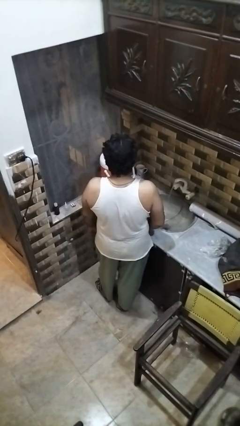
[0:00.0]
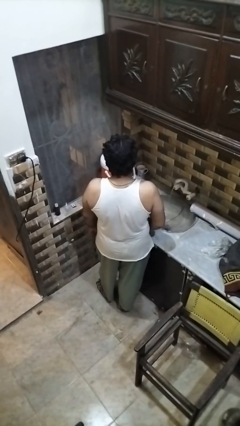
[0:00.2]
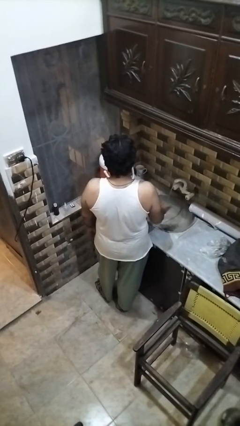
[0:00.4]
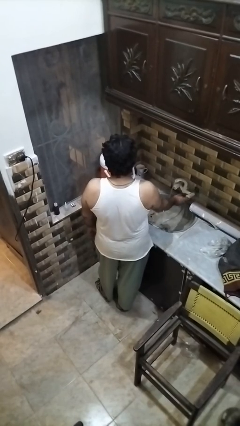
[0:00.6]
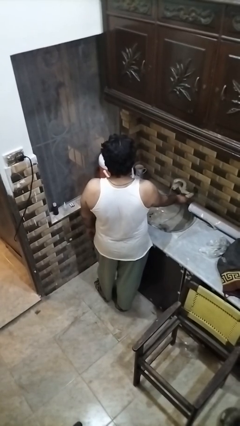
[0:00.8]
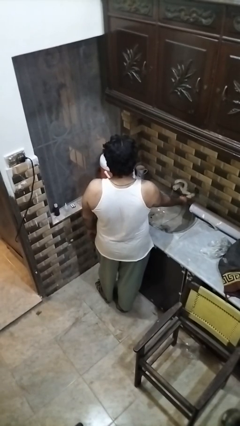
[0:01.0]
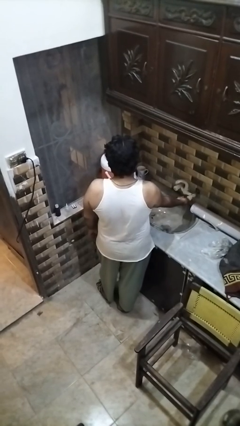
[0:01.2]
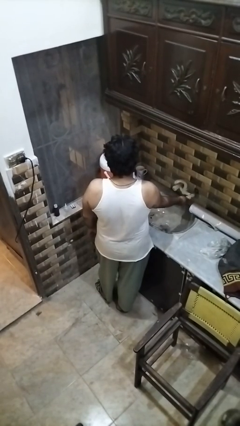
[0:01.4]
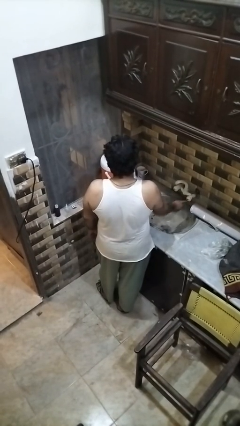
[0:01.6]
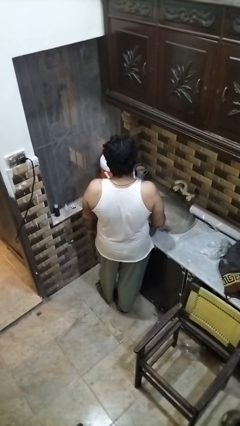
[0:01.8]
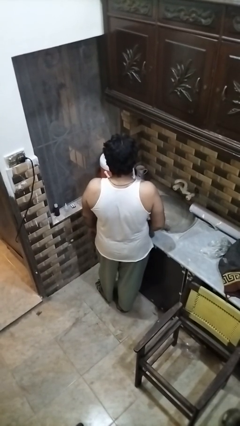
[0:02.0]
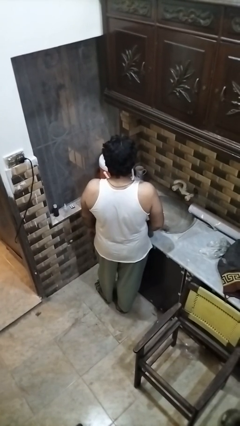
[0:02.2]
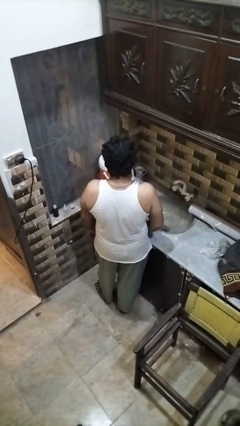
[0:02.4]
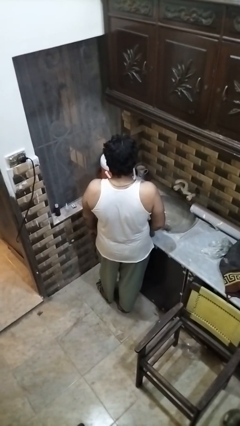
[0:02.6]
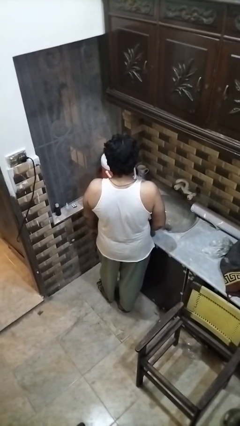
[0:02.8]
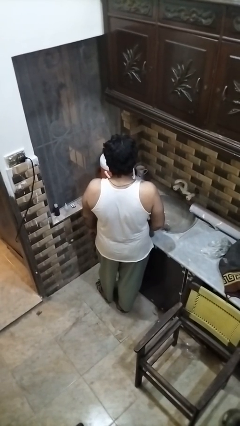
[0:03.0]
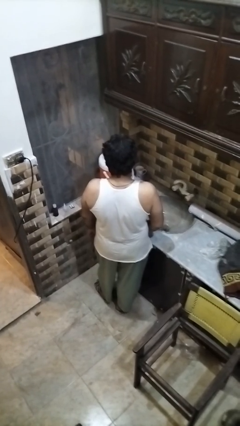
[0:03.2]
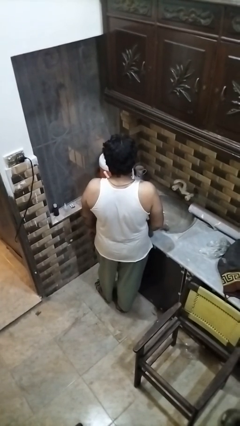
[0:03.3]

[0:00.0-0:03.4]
person turns off faucet

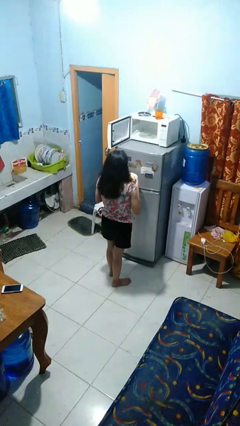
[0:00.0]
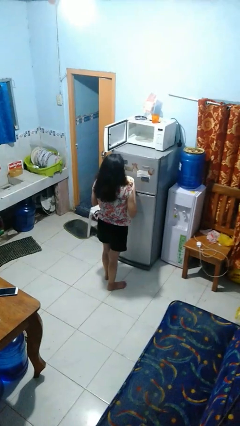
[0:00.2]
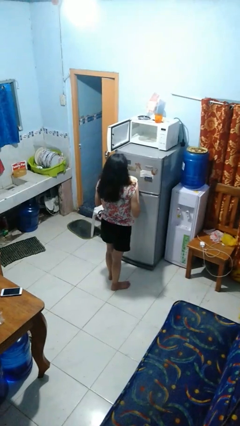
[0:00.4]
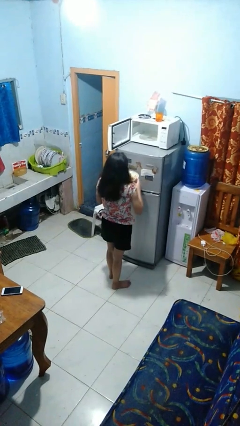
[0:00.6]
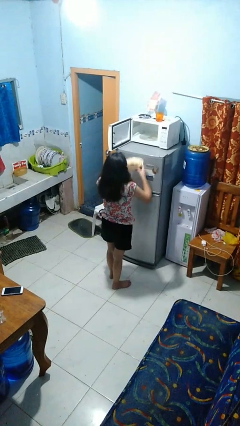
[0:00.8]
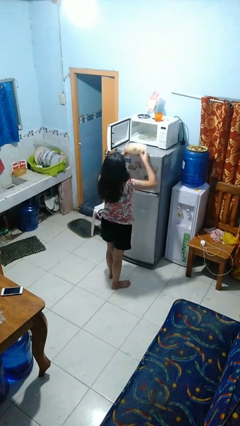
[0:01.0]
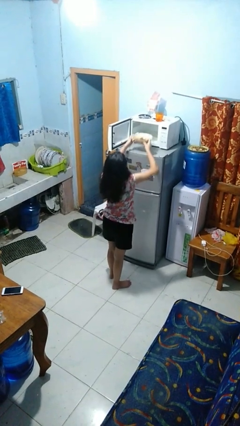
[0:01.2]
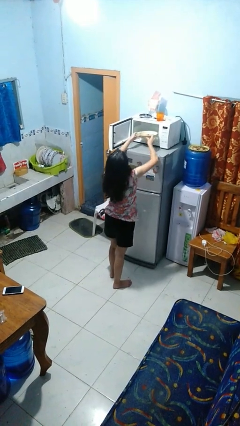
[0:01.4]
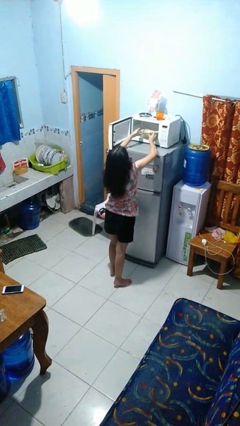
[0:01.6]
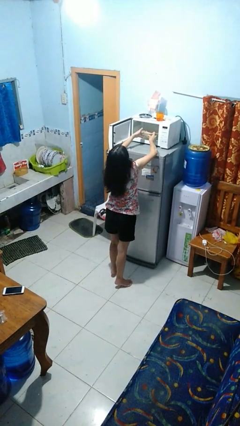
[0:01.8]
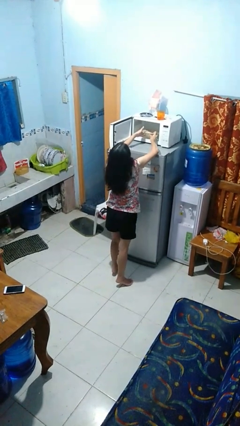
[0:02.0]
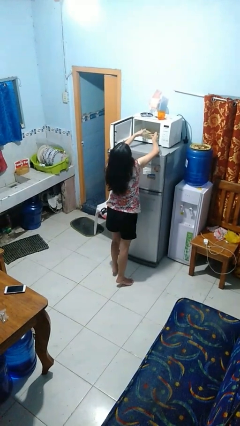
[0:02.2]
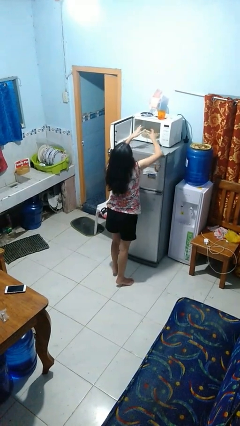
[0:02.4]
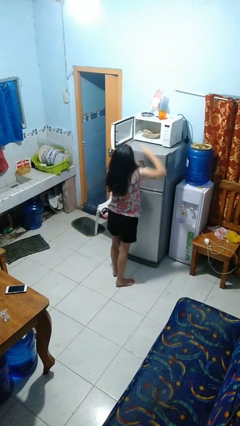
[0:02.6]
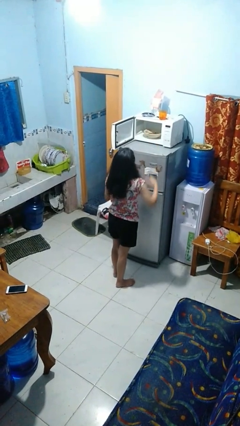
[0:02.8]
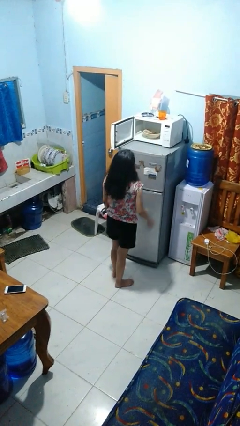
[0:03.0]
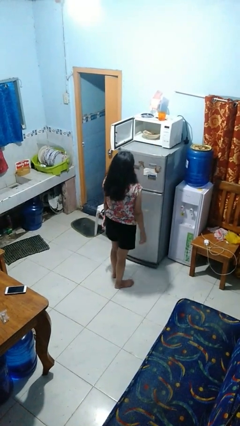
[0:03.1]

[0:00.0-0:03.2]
person puts object into microwave

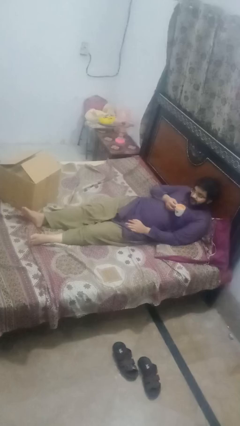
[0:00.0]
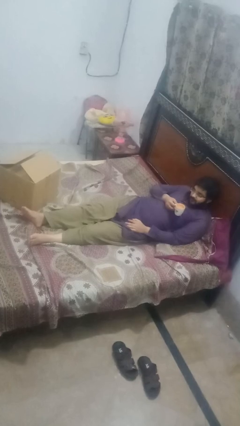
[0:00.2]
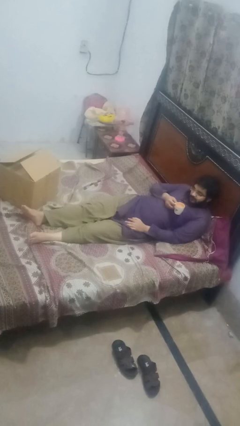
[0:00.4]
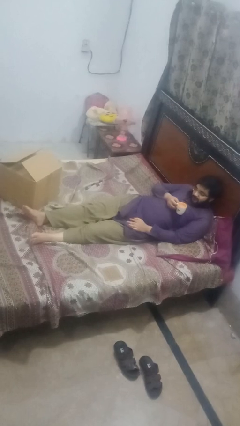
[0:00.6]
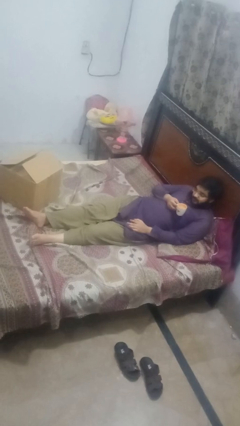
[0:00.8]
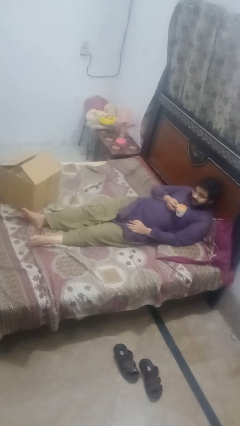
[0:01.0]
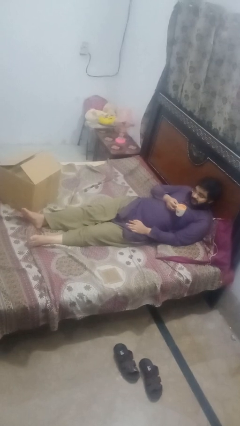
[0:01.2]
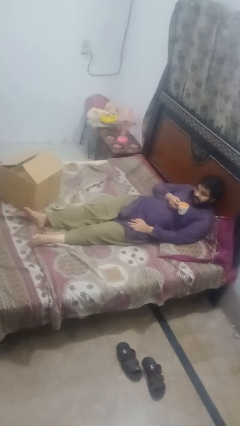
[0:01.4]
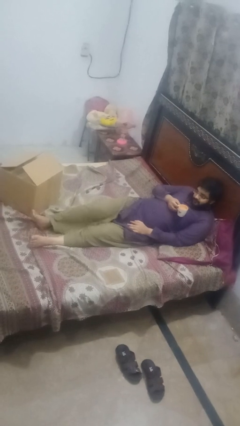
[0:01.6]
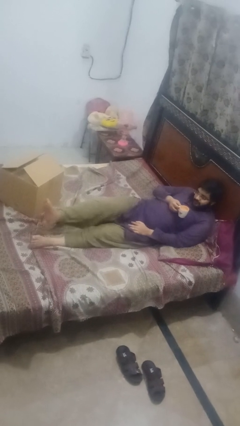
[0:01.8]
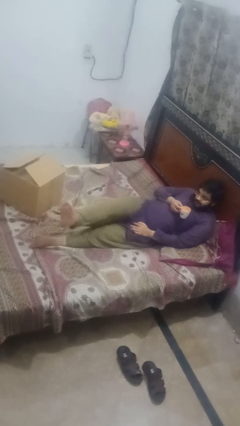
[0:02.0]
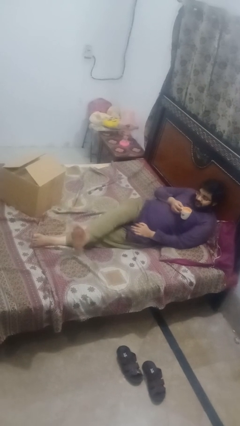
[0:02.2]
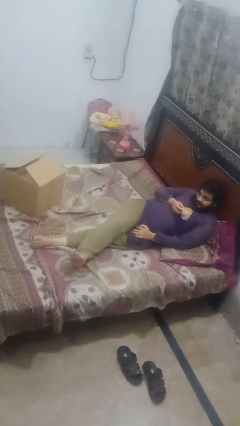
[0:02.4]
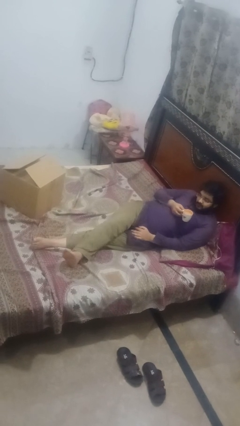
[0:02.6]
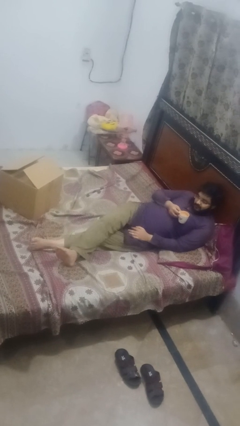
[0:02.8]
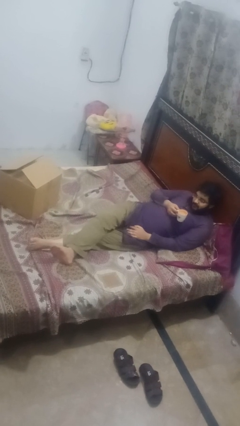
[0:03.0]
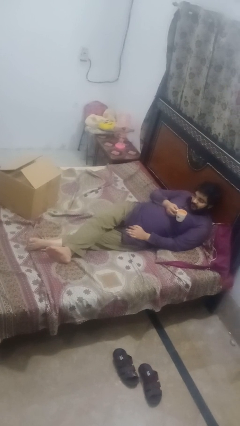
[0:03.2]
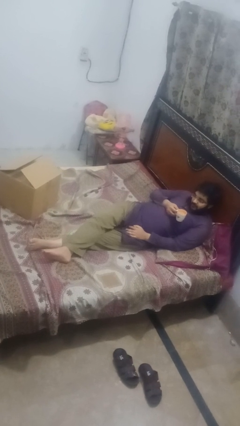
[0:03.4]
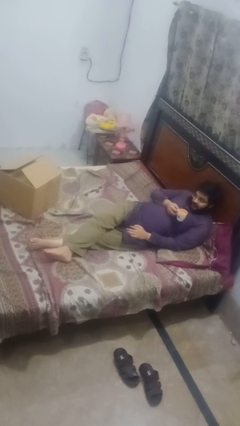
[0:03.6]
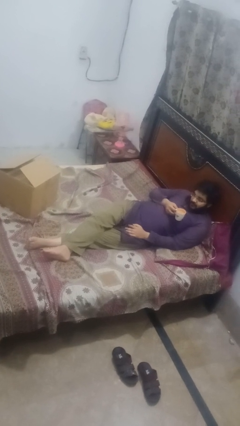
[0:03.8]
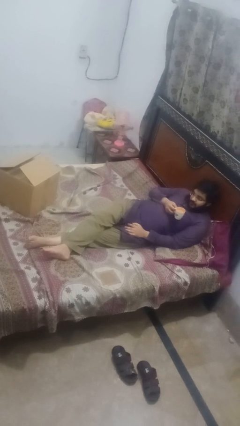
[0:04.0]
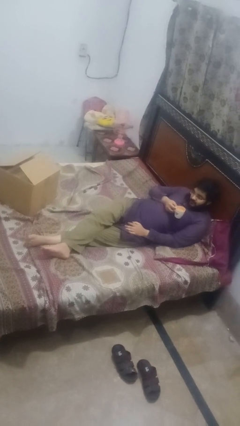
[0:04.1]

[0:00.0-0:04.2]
person crosses legs

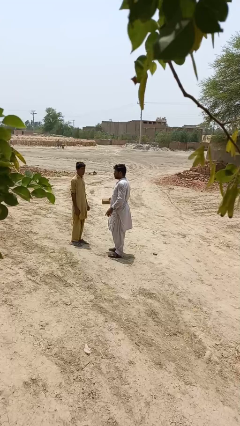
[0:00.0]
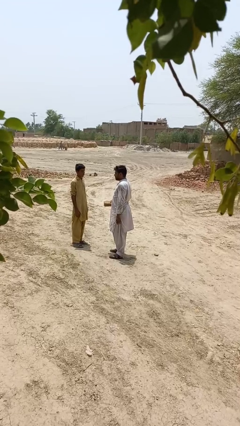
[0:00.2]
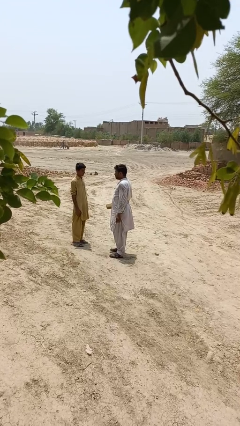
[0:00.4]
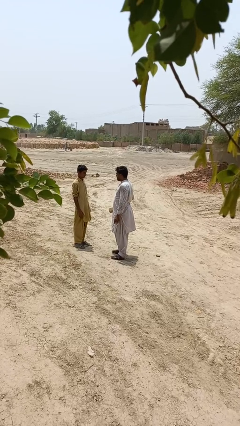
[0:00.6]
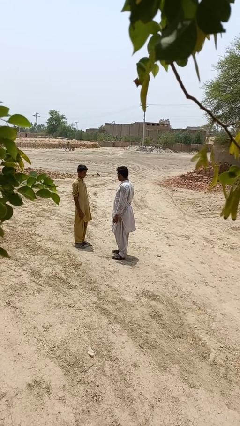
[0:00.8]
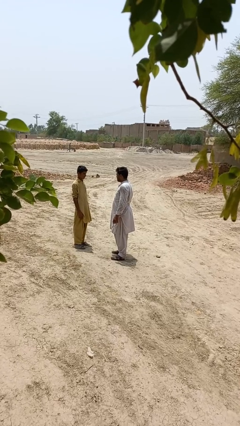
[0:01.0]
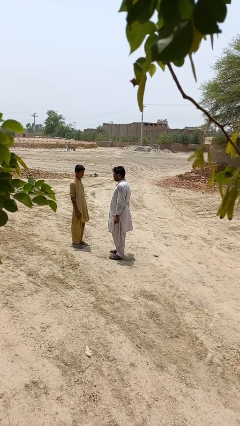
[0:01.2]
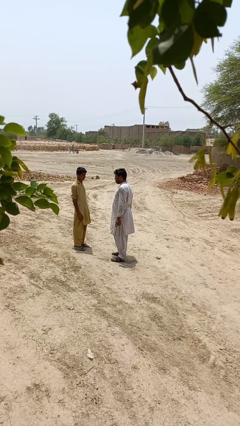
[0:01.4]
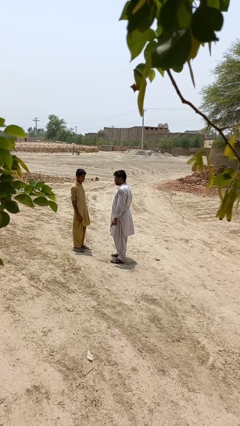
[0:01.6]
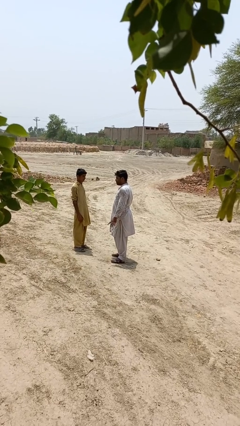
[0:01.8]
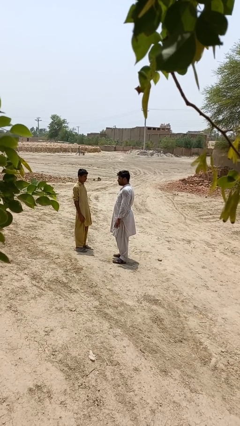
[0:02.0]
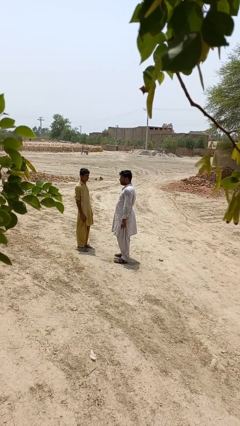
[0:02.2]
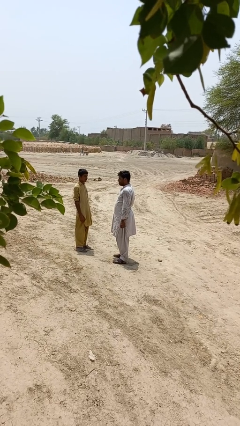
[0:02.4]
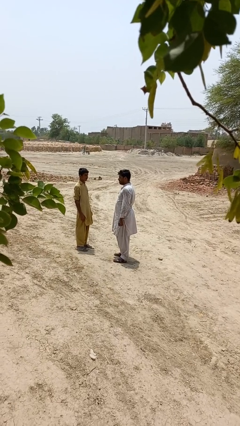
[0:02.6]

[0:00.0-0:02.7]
person transfers object to person

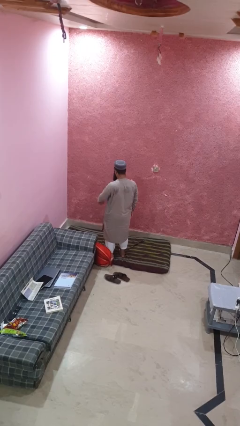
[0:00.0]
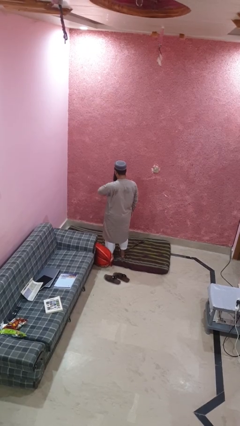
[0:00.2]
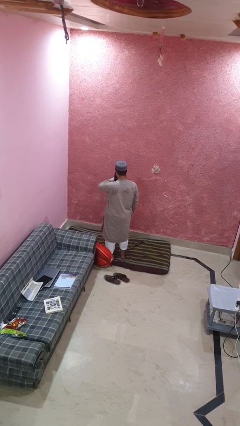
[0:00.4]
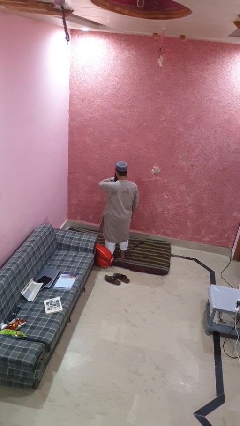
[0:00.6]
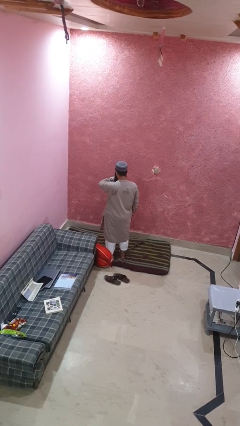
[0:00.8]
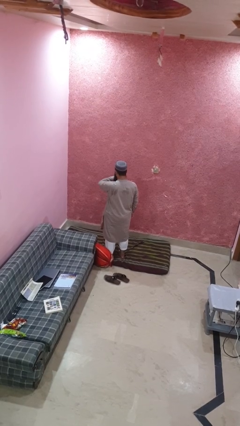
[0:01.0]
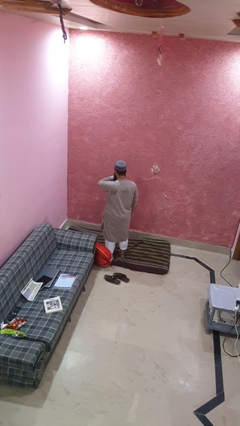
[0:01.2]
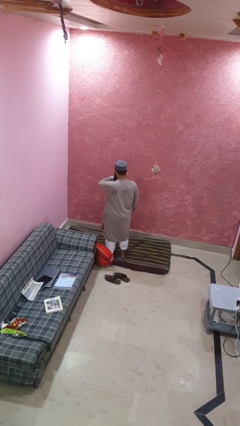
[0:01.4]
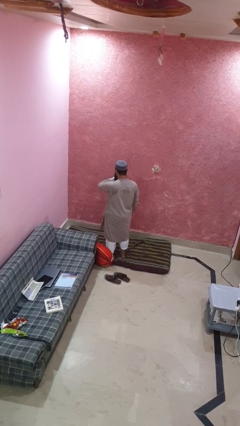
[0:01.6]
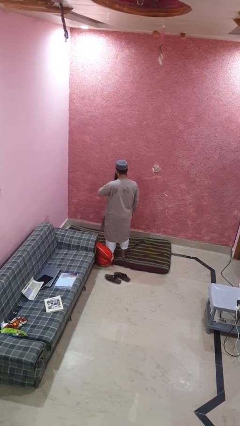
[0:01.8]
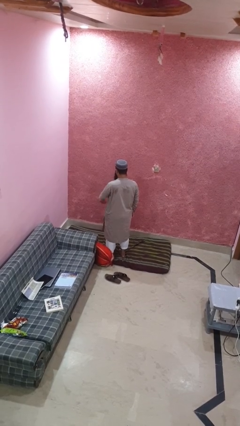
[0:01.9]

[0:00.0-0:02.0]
person looks at wristwatch

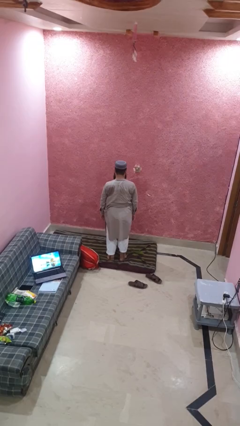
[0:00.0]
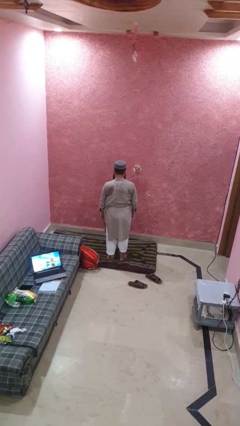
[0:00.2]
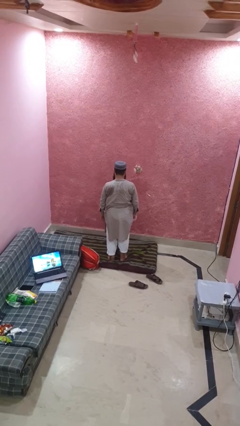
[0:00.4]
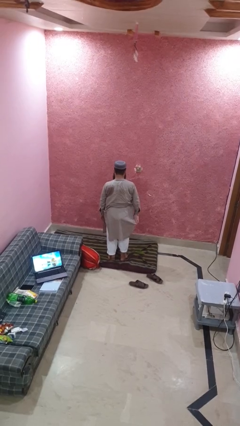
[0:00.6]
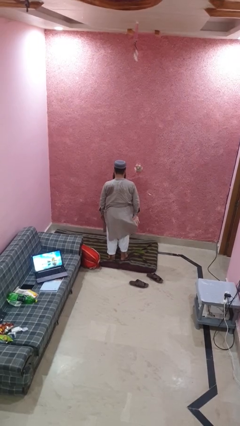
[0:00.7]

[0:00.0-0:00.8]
person stands up from floor

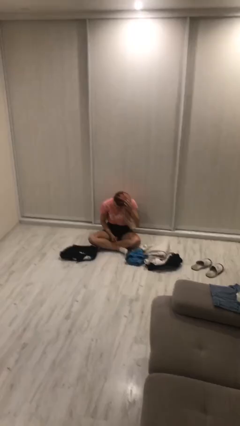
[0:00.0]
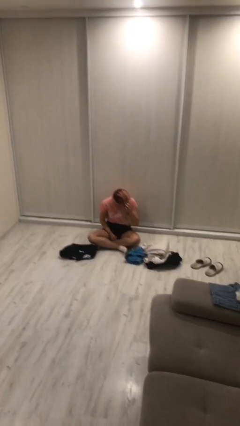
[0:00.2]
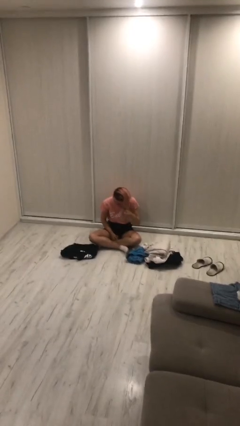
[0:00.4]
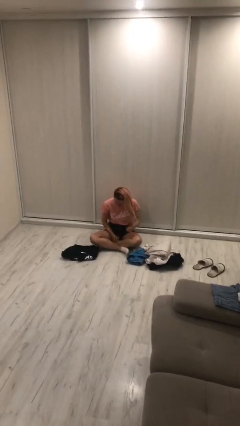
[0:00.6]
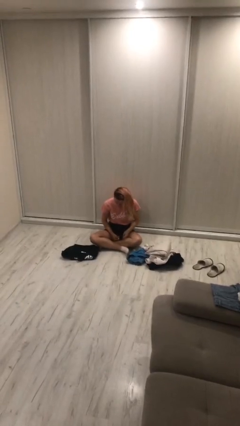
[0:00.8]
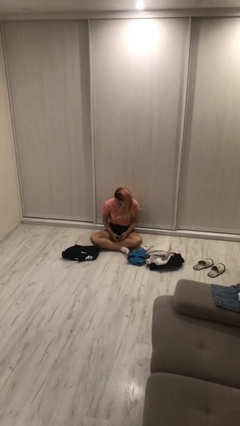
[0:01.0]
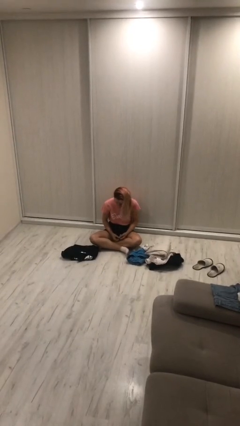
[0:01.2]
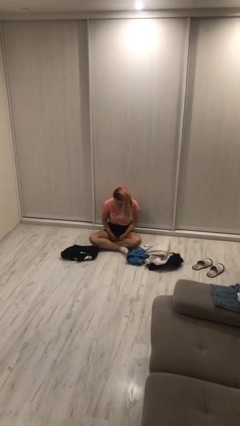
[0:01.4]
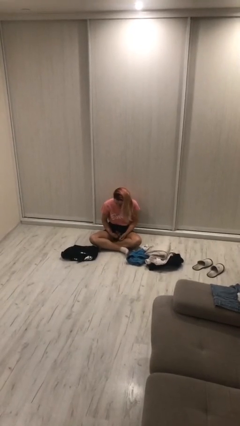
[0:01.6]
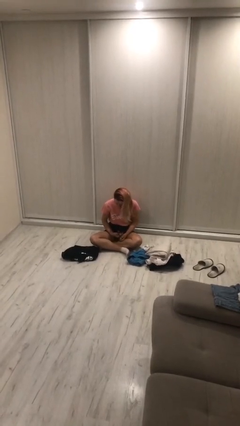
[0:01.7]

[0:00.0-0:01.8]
person takes off hairtie
